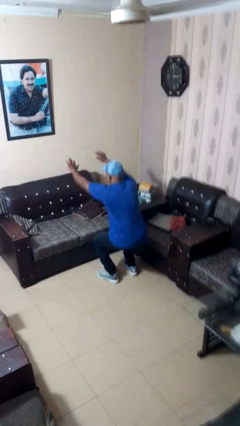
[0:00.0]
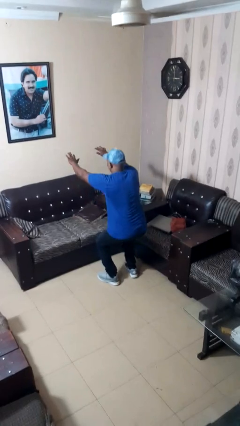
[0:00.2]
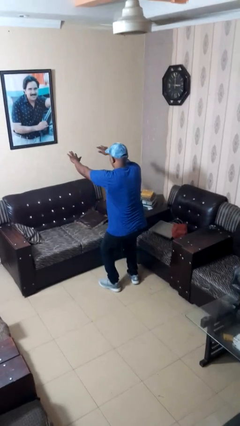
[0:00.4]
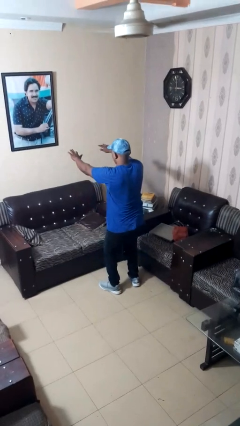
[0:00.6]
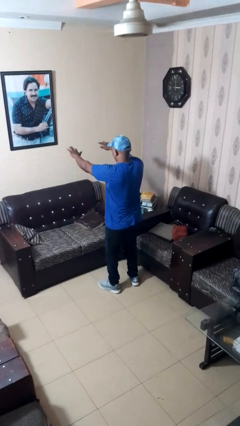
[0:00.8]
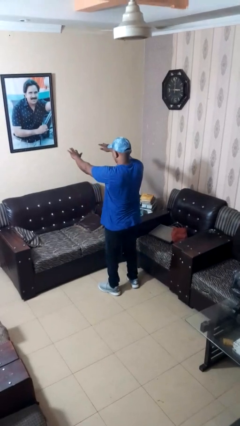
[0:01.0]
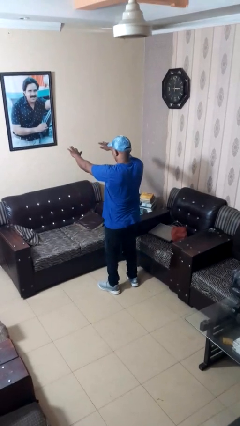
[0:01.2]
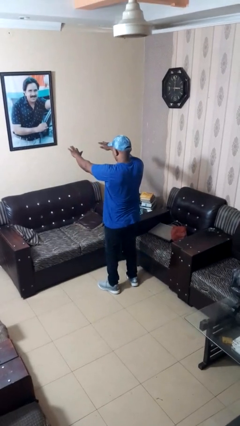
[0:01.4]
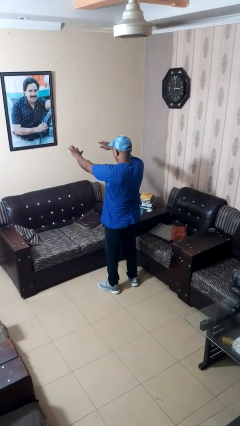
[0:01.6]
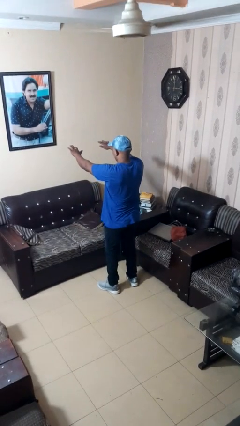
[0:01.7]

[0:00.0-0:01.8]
person stands up

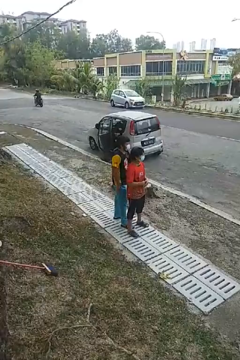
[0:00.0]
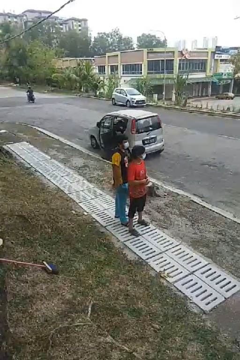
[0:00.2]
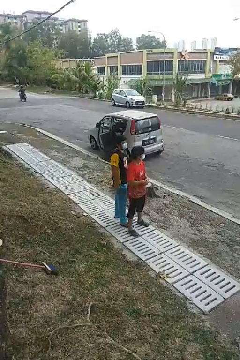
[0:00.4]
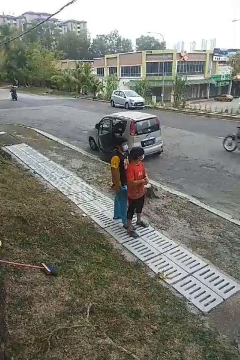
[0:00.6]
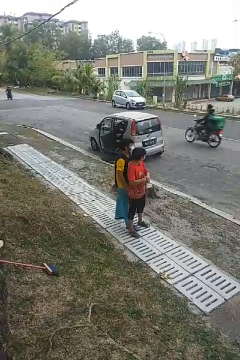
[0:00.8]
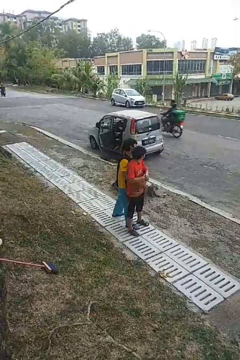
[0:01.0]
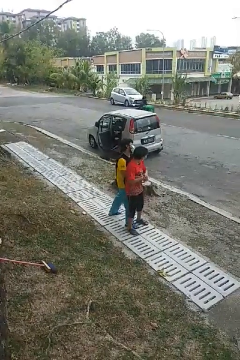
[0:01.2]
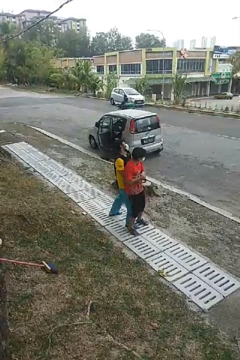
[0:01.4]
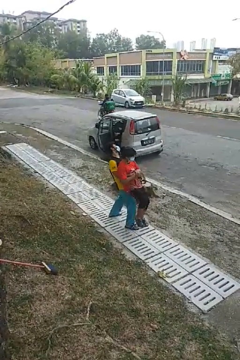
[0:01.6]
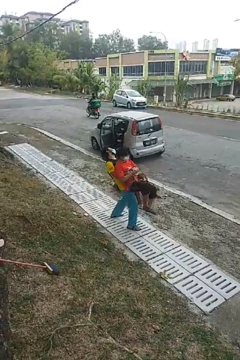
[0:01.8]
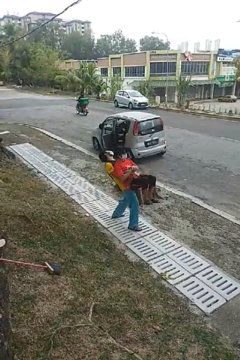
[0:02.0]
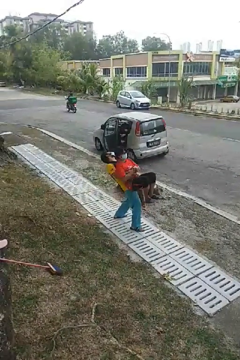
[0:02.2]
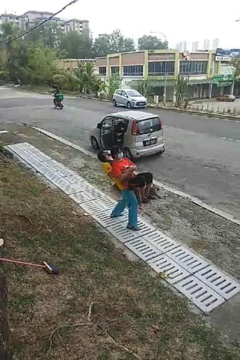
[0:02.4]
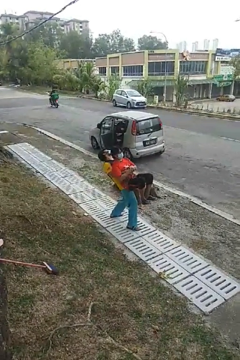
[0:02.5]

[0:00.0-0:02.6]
person picks up person

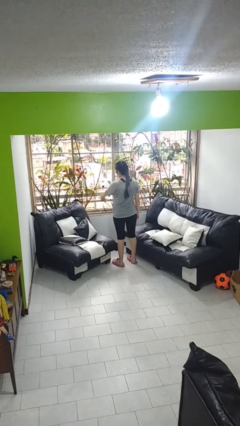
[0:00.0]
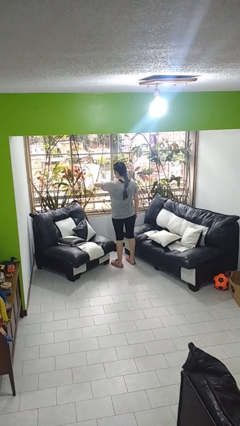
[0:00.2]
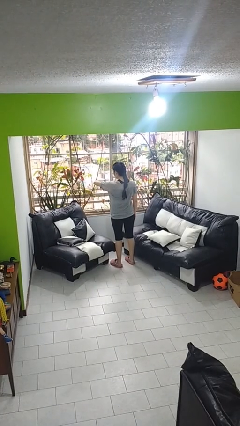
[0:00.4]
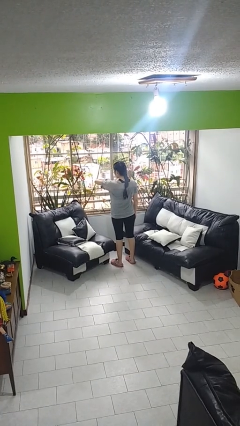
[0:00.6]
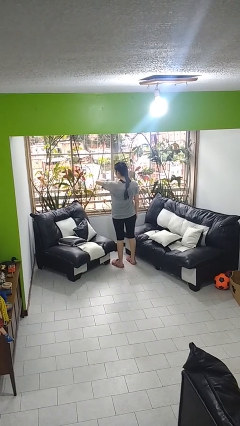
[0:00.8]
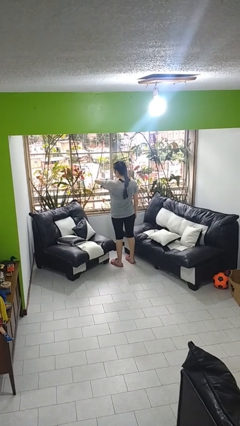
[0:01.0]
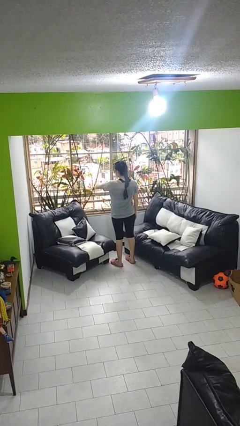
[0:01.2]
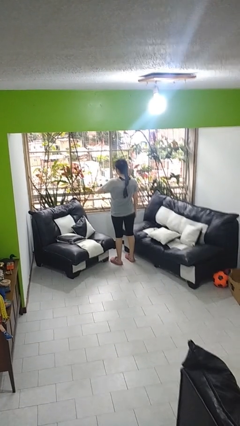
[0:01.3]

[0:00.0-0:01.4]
person looks at wristwatch

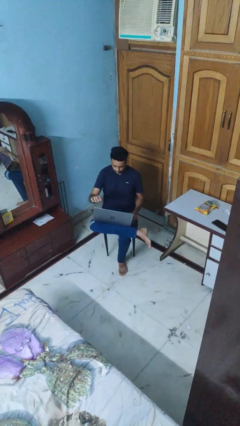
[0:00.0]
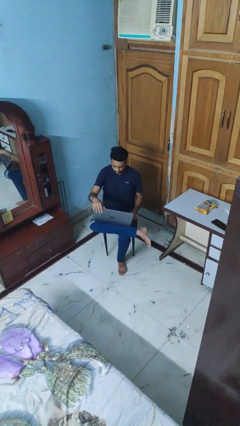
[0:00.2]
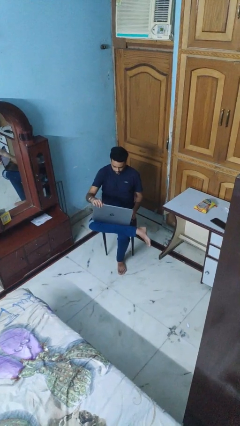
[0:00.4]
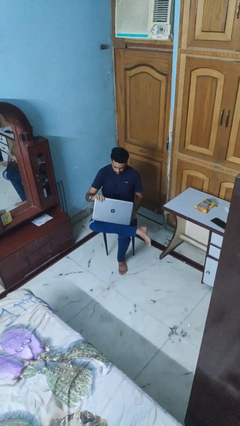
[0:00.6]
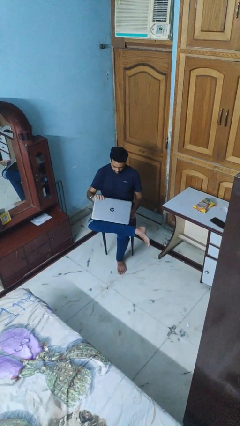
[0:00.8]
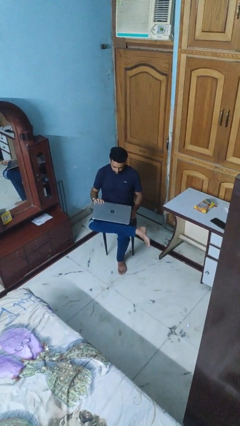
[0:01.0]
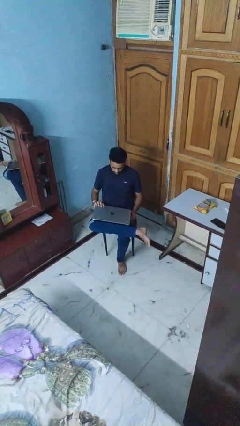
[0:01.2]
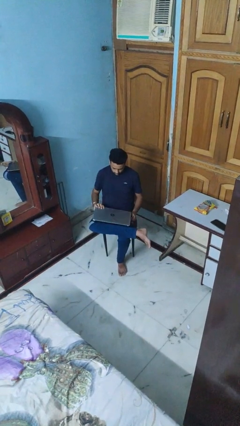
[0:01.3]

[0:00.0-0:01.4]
person closes laptop

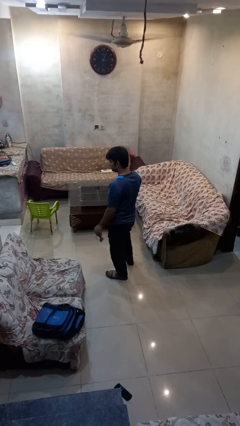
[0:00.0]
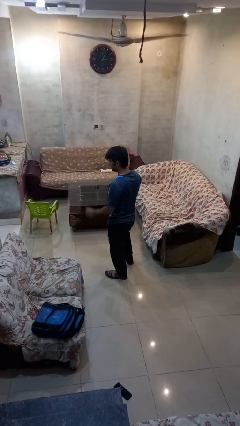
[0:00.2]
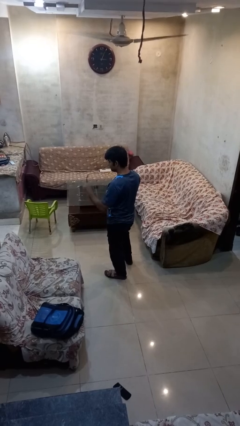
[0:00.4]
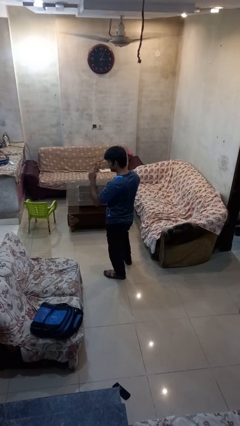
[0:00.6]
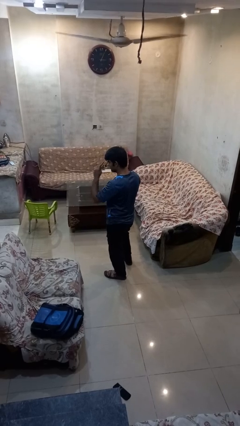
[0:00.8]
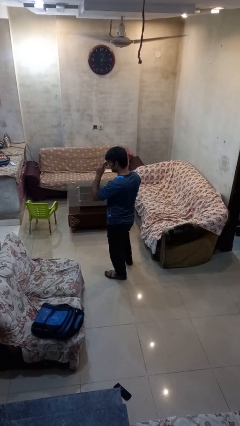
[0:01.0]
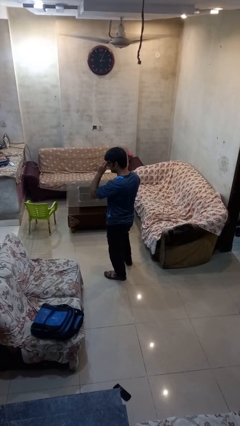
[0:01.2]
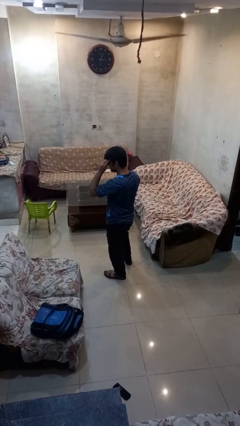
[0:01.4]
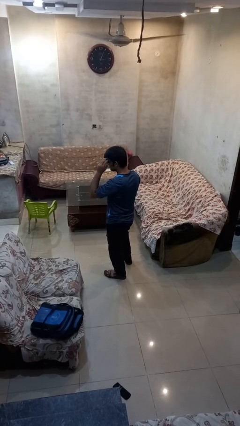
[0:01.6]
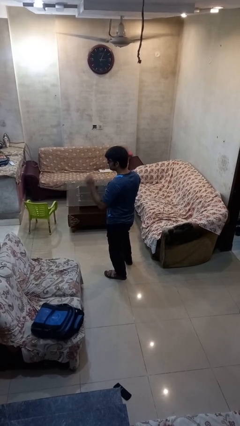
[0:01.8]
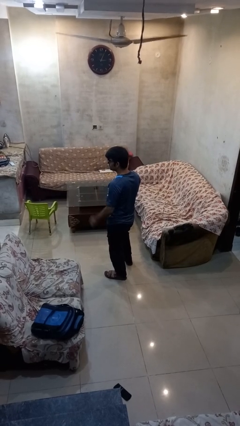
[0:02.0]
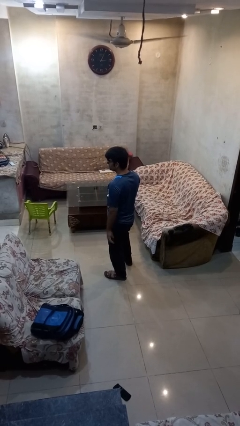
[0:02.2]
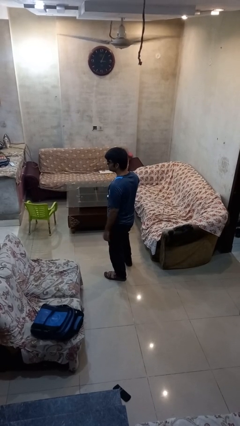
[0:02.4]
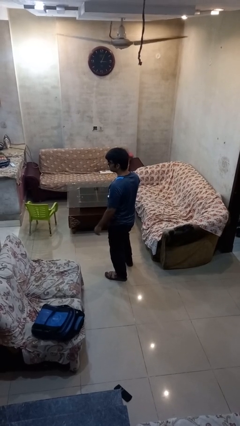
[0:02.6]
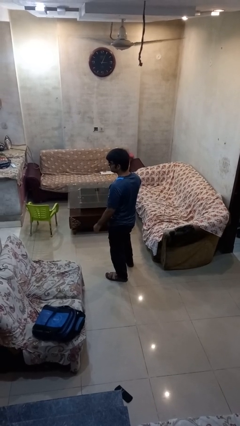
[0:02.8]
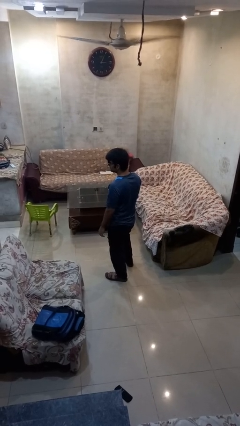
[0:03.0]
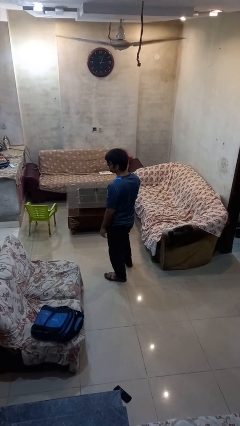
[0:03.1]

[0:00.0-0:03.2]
person puts on sunglasses

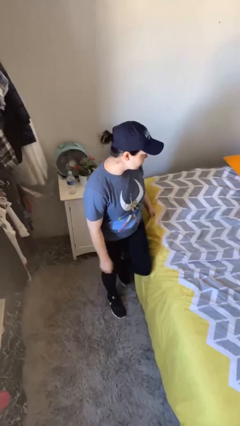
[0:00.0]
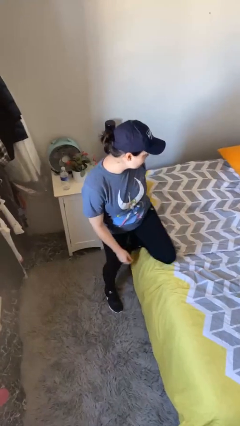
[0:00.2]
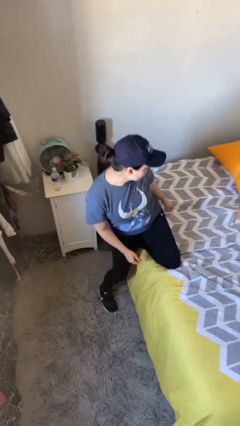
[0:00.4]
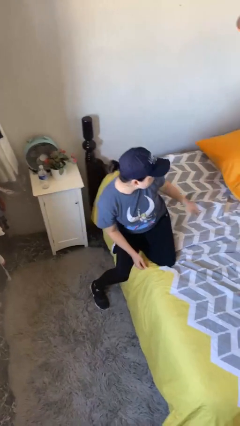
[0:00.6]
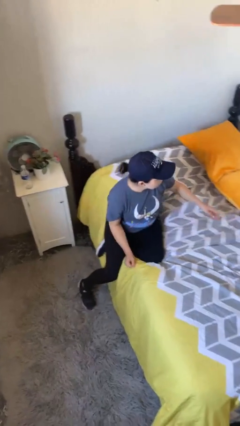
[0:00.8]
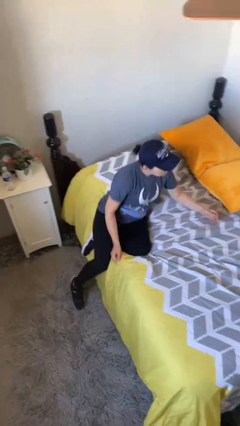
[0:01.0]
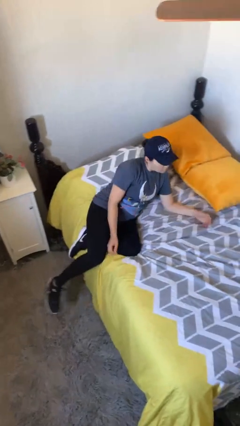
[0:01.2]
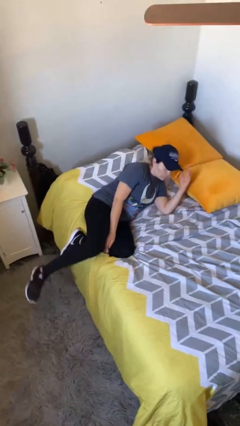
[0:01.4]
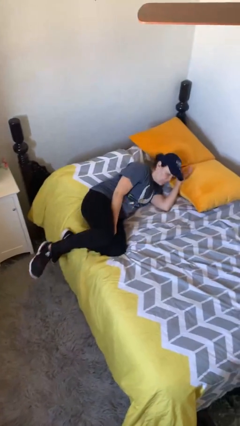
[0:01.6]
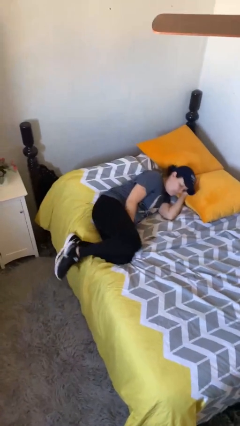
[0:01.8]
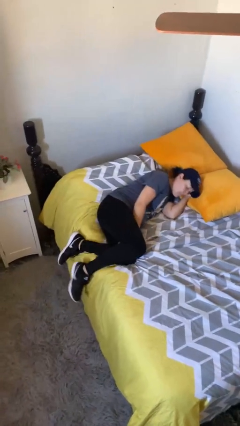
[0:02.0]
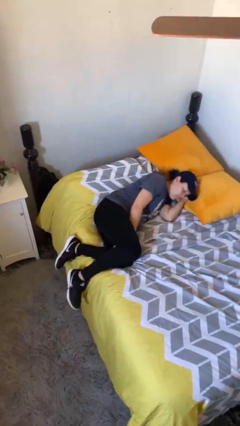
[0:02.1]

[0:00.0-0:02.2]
person lies down on bed

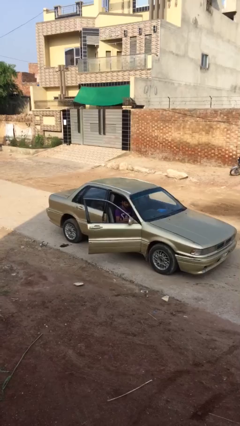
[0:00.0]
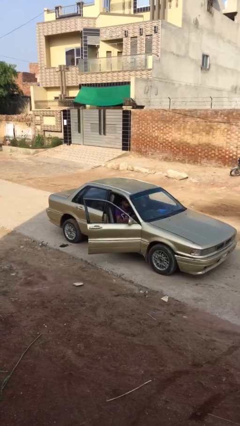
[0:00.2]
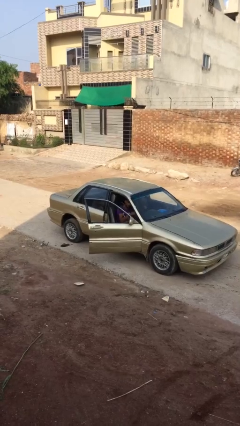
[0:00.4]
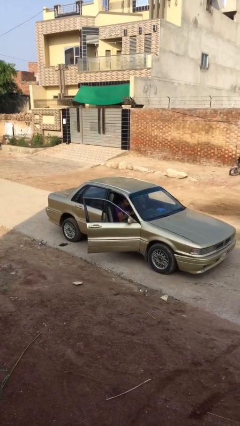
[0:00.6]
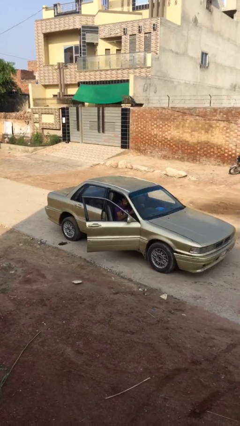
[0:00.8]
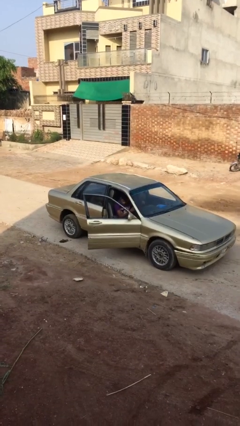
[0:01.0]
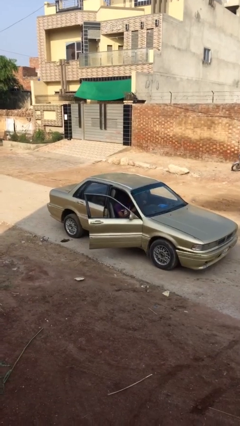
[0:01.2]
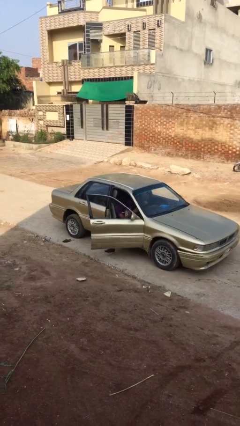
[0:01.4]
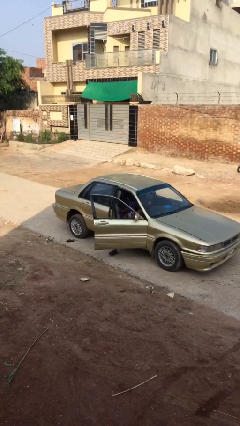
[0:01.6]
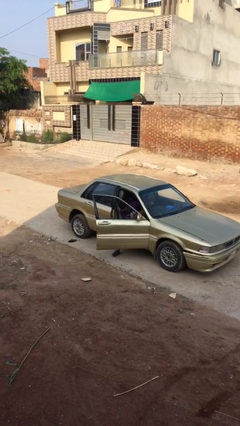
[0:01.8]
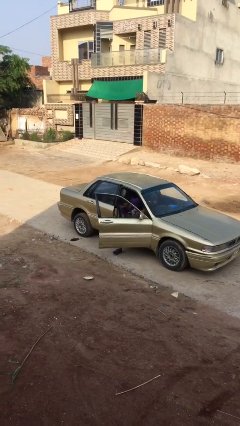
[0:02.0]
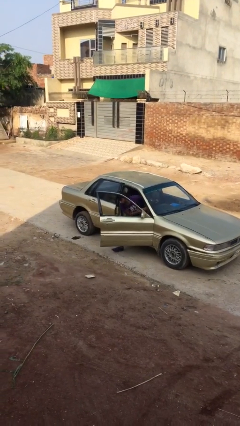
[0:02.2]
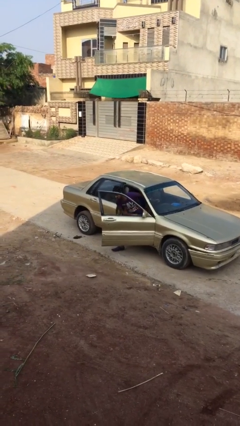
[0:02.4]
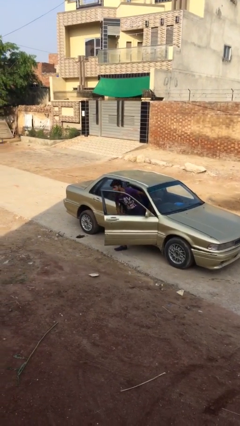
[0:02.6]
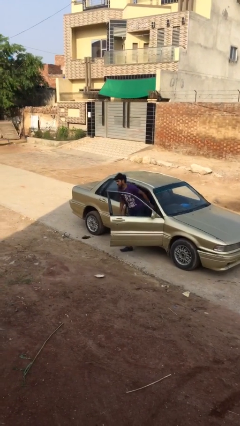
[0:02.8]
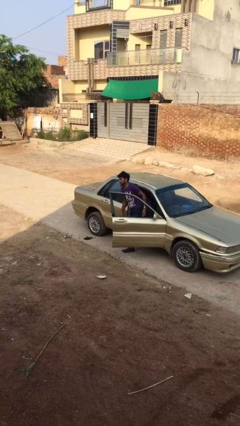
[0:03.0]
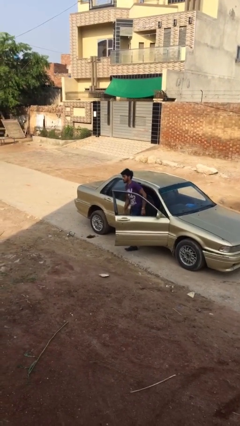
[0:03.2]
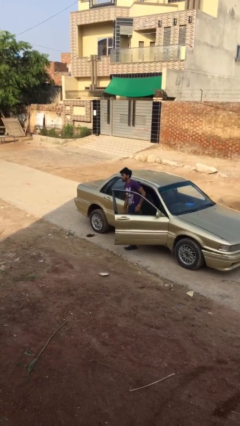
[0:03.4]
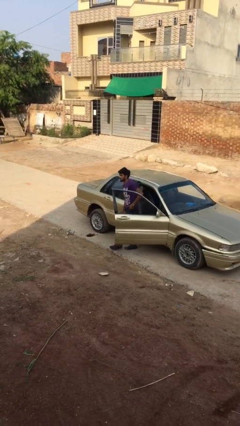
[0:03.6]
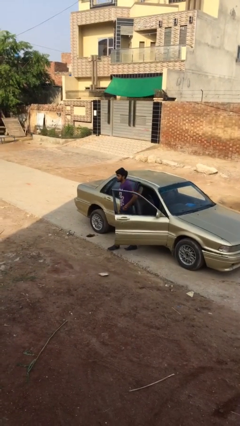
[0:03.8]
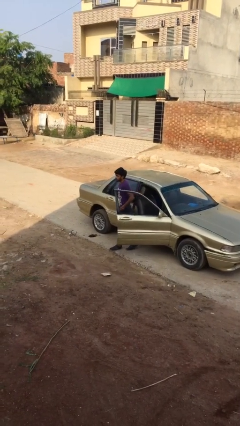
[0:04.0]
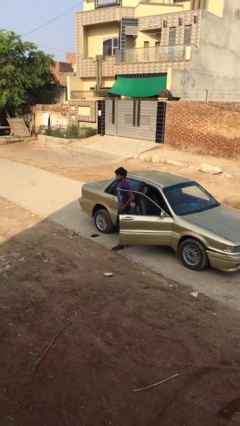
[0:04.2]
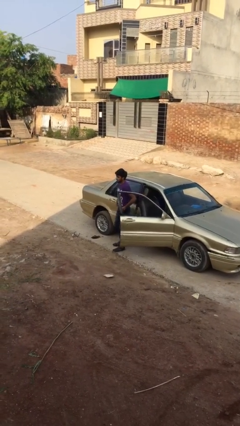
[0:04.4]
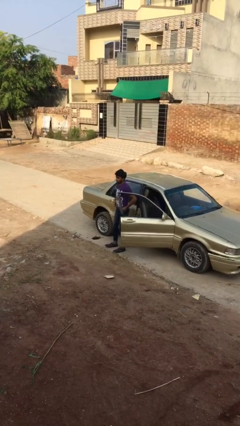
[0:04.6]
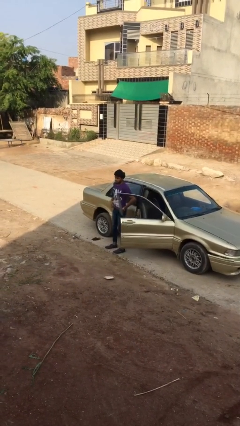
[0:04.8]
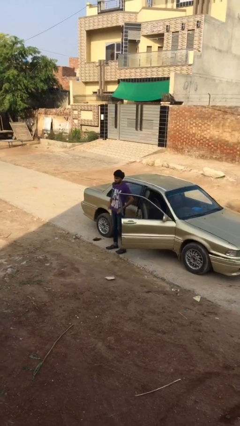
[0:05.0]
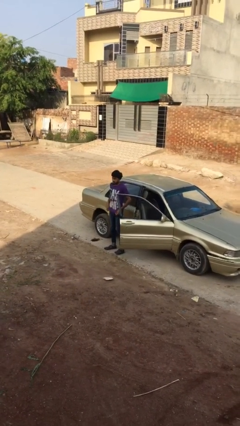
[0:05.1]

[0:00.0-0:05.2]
person exits car
